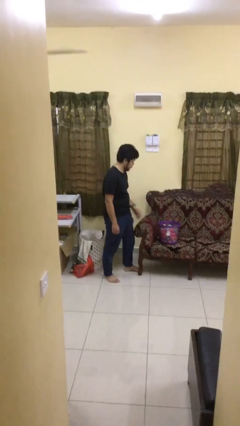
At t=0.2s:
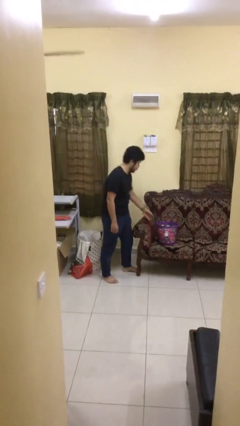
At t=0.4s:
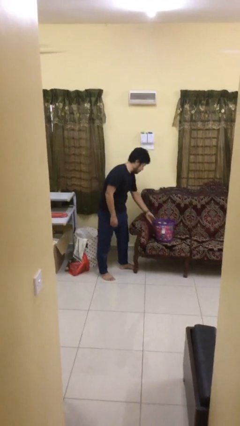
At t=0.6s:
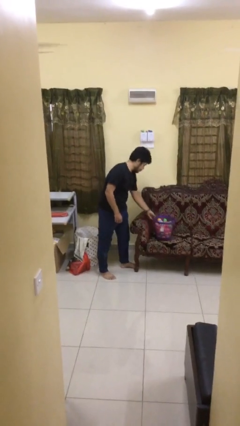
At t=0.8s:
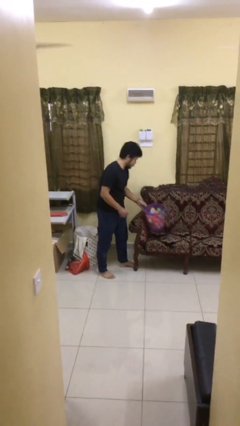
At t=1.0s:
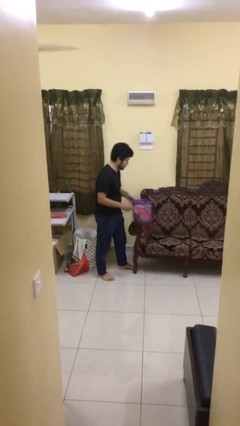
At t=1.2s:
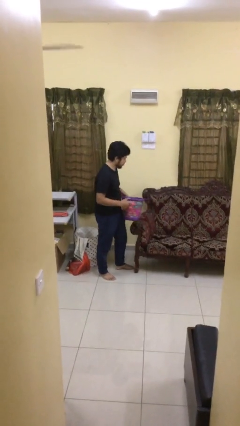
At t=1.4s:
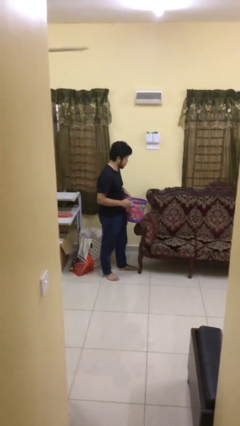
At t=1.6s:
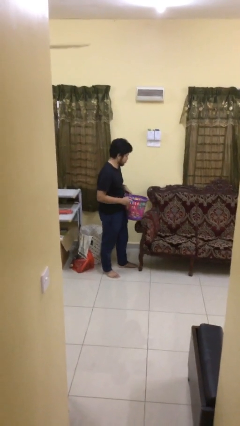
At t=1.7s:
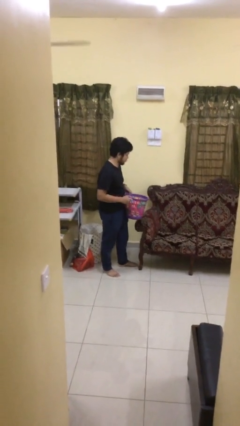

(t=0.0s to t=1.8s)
person picks up object from couch

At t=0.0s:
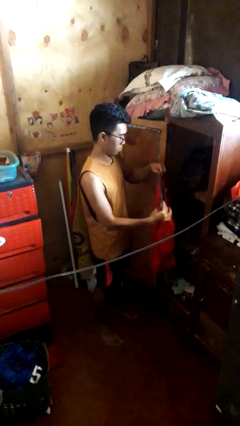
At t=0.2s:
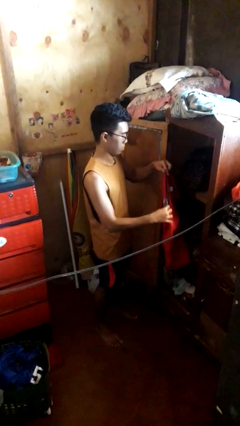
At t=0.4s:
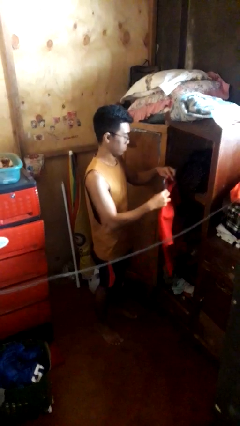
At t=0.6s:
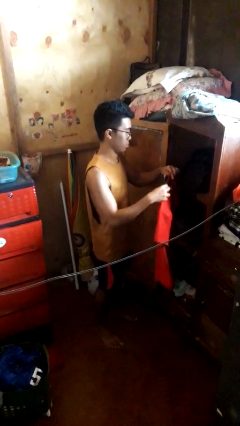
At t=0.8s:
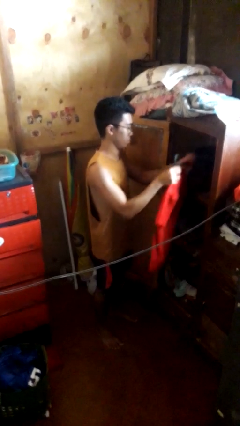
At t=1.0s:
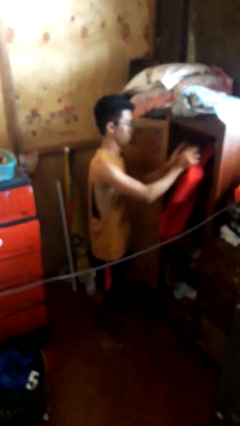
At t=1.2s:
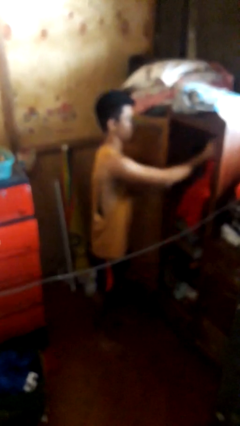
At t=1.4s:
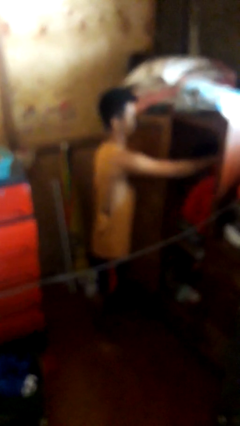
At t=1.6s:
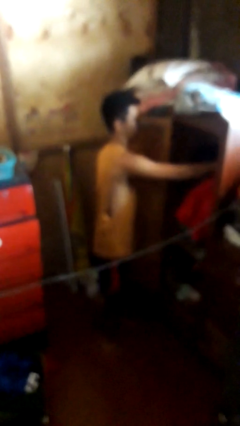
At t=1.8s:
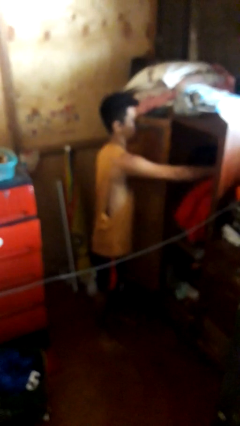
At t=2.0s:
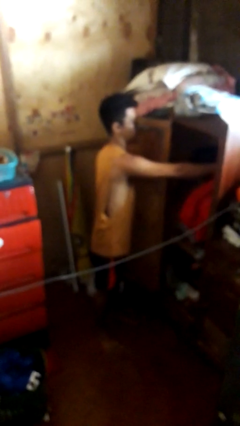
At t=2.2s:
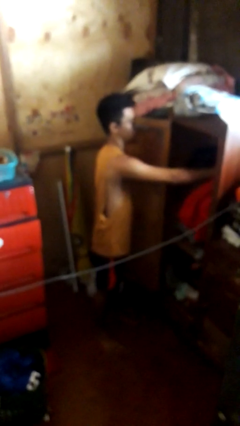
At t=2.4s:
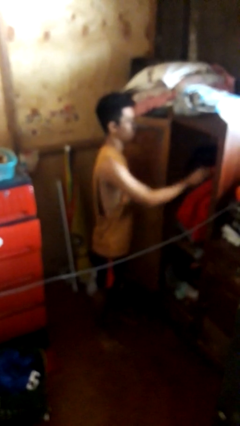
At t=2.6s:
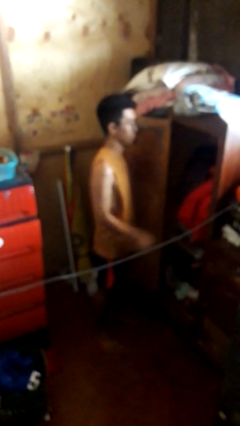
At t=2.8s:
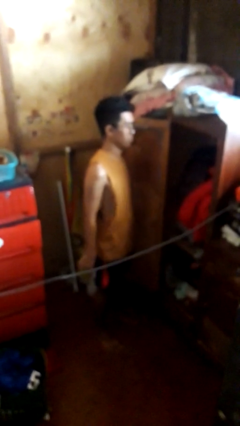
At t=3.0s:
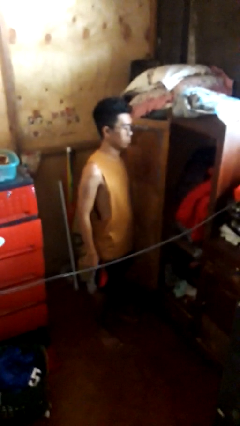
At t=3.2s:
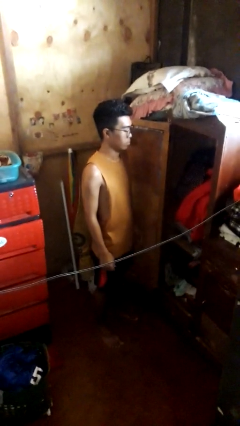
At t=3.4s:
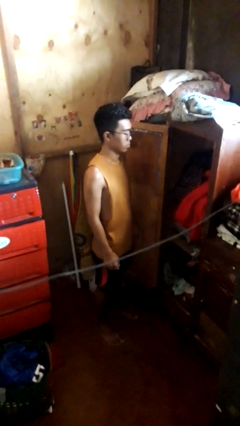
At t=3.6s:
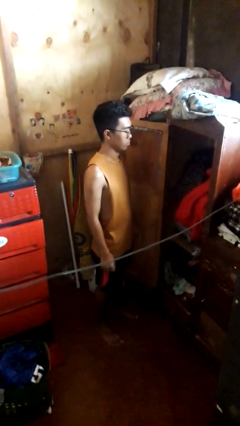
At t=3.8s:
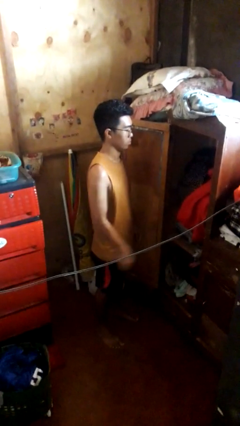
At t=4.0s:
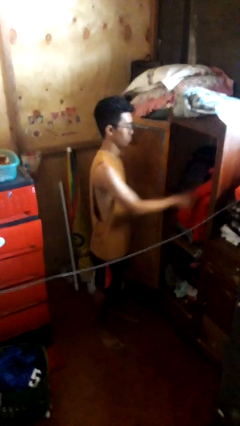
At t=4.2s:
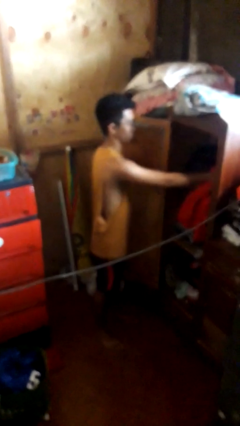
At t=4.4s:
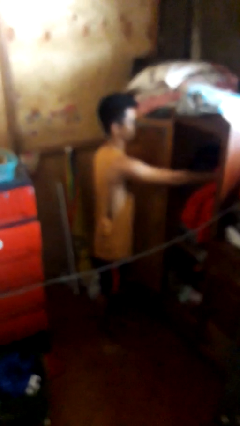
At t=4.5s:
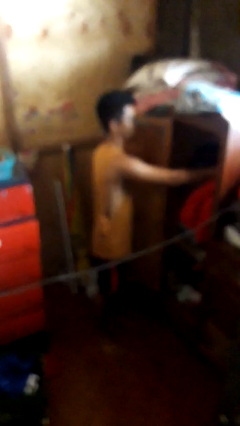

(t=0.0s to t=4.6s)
person puts clothes into closet

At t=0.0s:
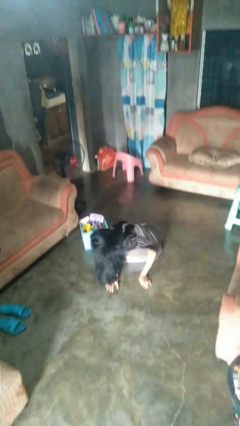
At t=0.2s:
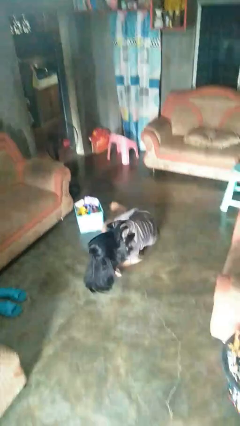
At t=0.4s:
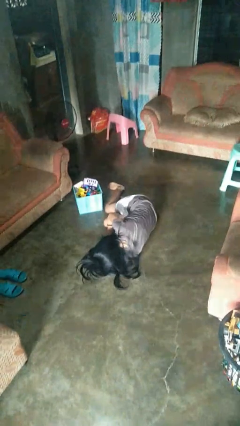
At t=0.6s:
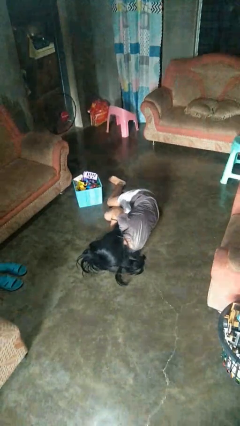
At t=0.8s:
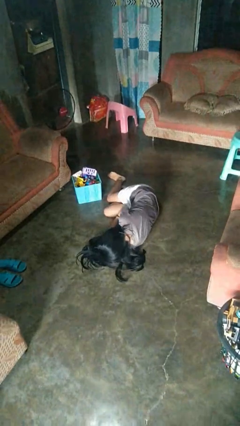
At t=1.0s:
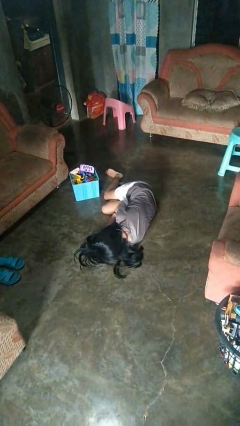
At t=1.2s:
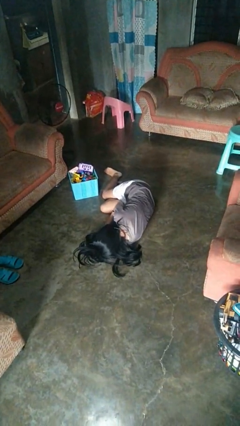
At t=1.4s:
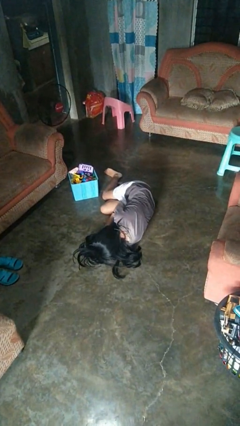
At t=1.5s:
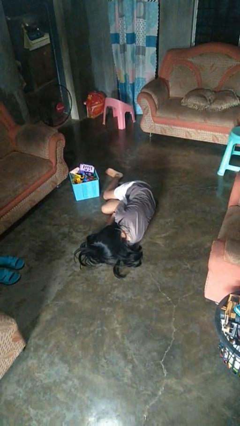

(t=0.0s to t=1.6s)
person lies down on floor

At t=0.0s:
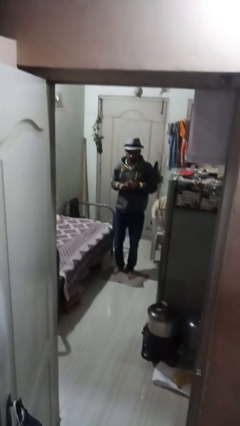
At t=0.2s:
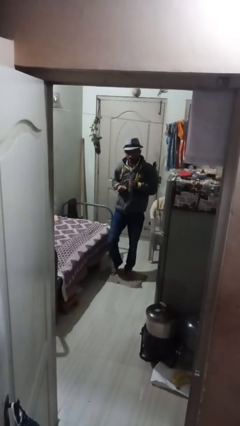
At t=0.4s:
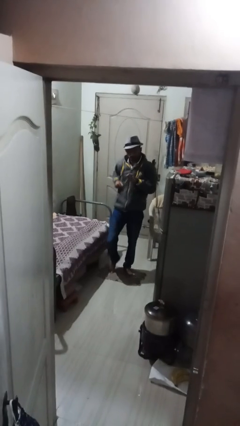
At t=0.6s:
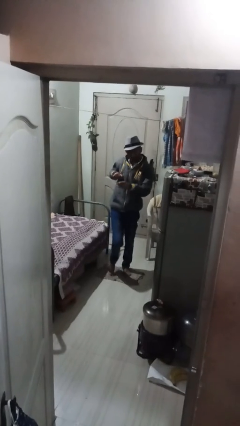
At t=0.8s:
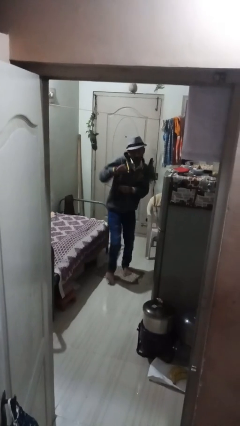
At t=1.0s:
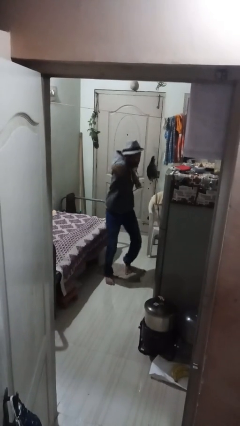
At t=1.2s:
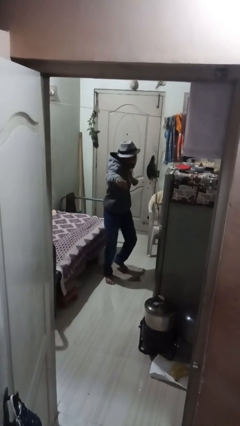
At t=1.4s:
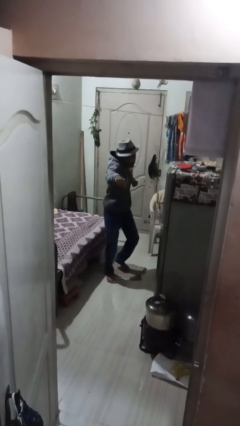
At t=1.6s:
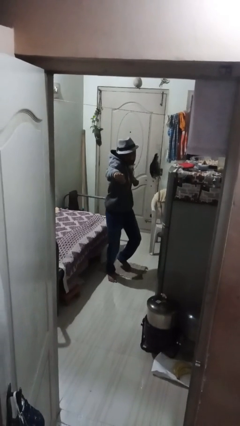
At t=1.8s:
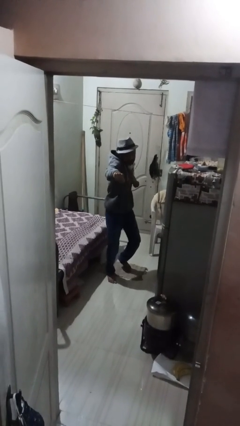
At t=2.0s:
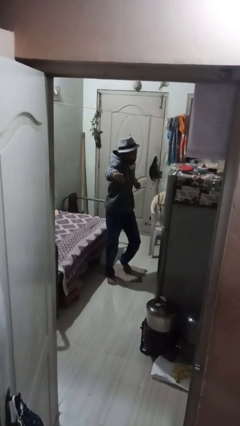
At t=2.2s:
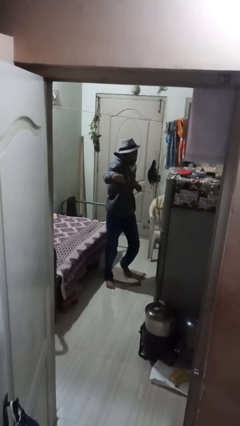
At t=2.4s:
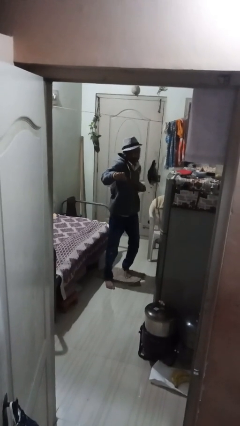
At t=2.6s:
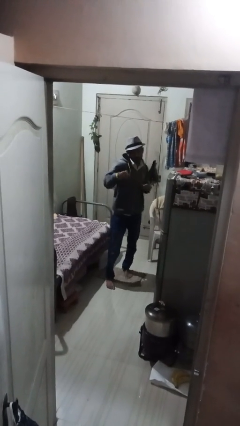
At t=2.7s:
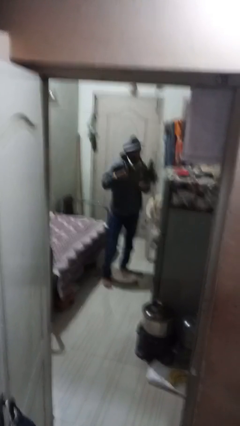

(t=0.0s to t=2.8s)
person punches

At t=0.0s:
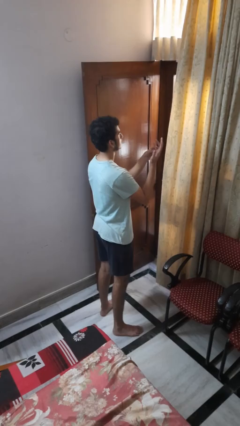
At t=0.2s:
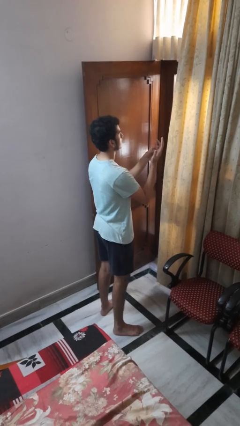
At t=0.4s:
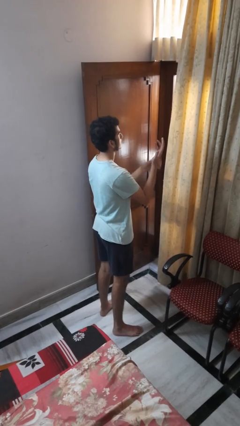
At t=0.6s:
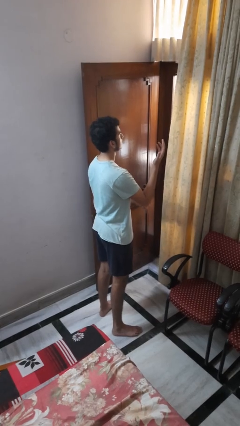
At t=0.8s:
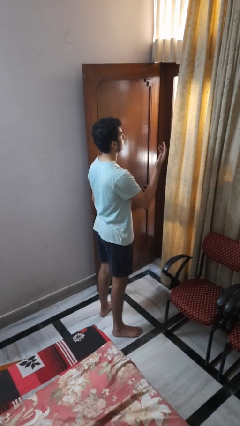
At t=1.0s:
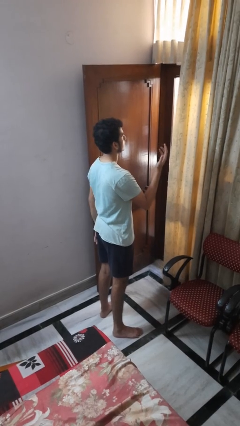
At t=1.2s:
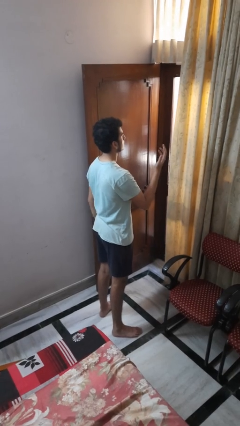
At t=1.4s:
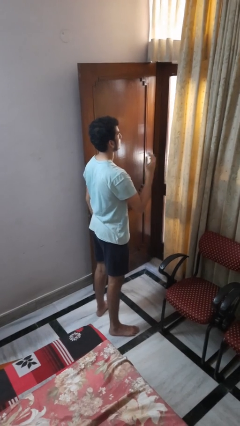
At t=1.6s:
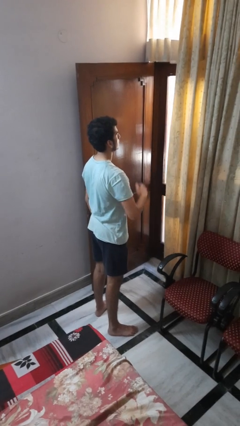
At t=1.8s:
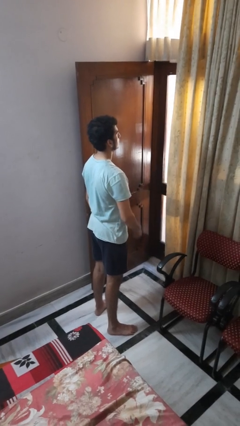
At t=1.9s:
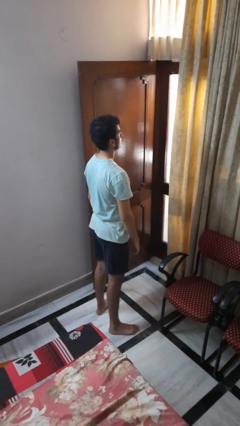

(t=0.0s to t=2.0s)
person puts on ring

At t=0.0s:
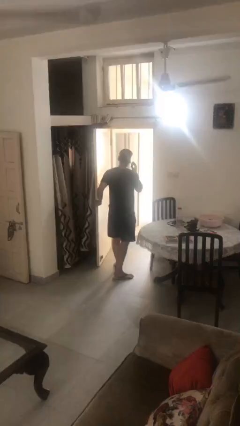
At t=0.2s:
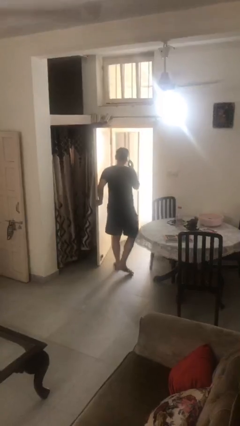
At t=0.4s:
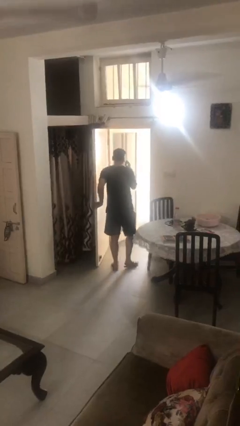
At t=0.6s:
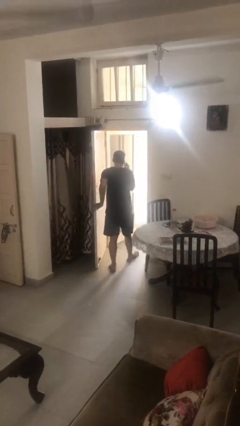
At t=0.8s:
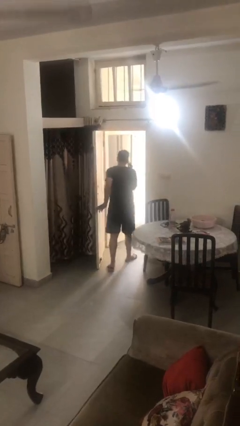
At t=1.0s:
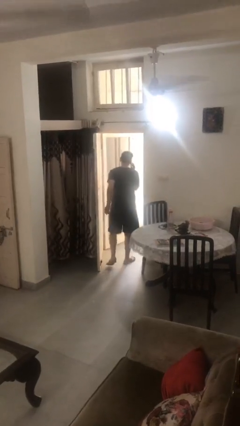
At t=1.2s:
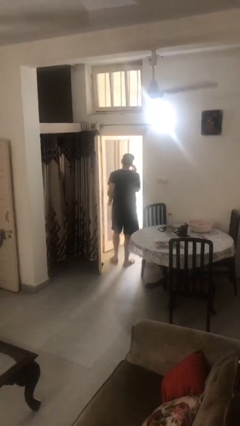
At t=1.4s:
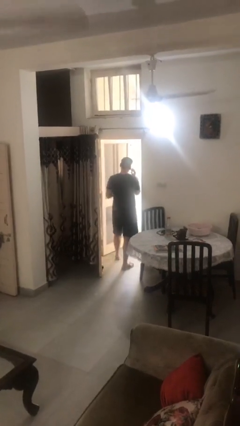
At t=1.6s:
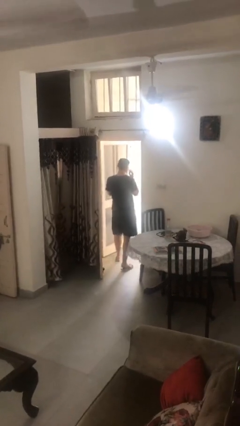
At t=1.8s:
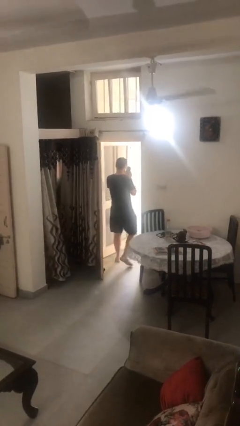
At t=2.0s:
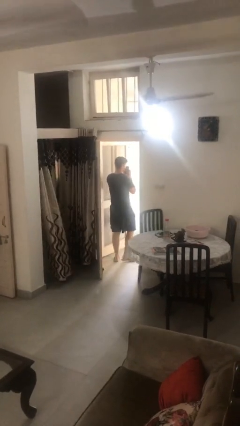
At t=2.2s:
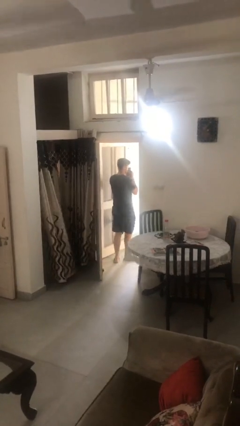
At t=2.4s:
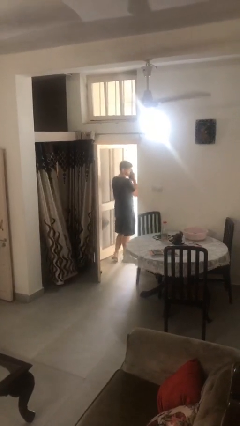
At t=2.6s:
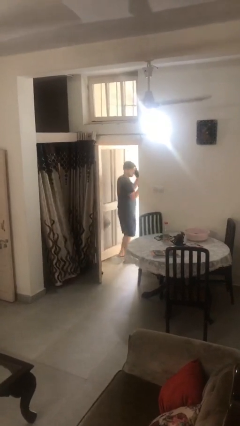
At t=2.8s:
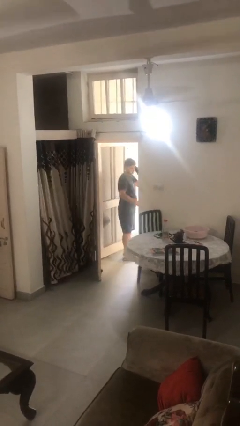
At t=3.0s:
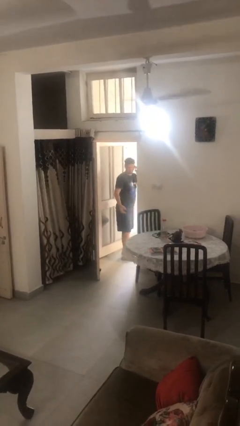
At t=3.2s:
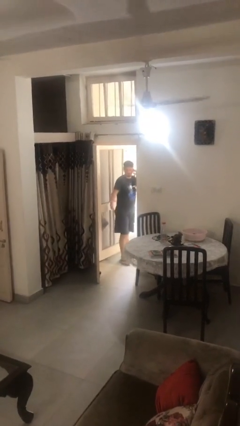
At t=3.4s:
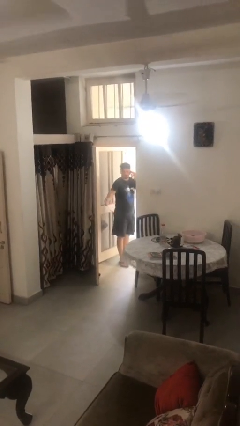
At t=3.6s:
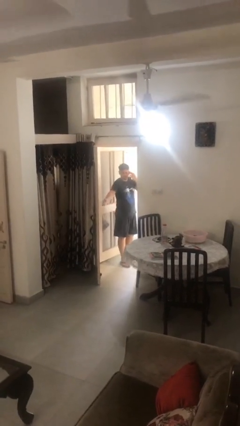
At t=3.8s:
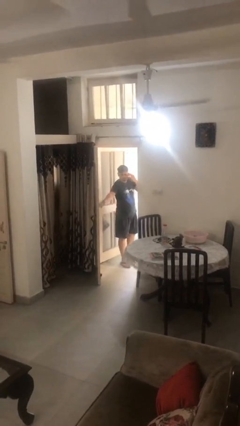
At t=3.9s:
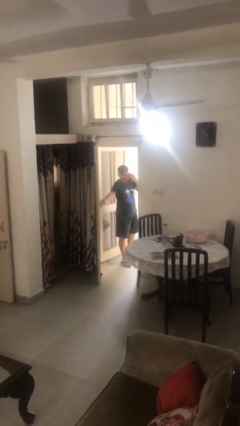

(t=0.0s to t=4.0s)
person exits scene through structure

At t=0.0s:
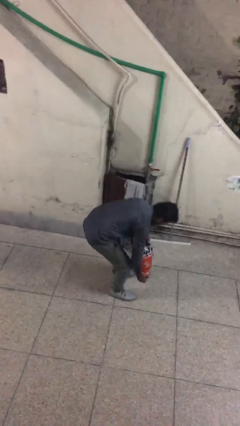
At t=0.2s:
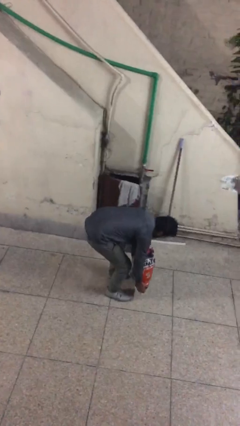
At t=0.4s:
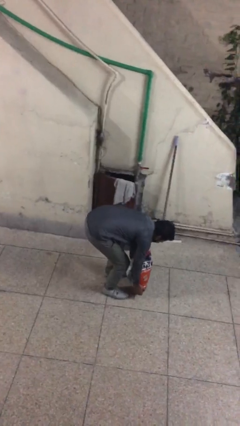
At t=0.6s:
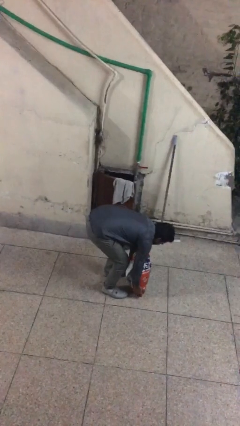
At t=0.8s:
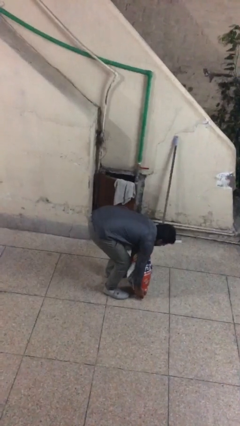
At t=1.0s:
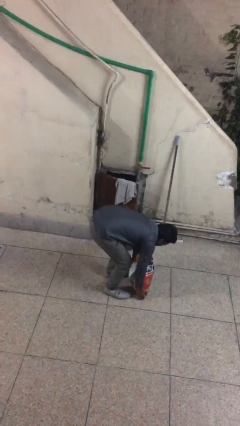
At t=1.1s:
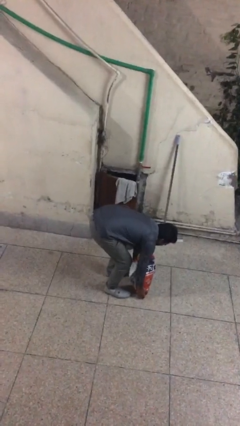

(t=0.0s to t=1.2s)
person puts down object on floor
